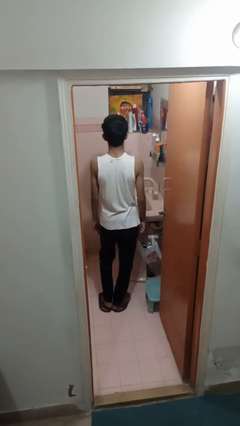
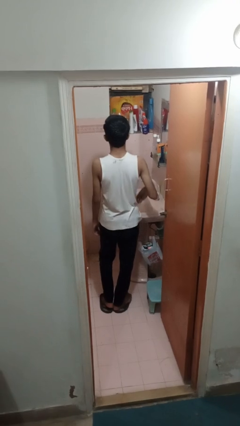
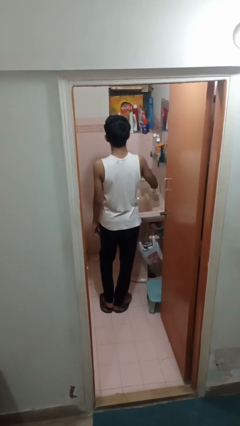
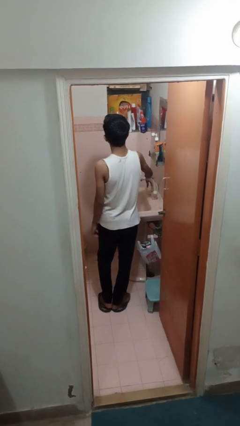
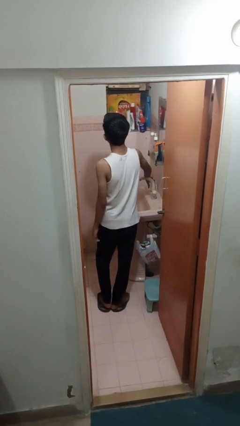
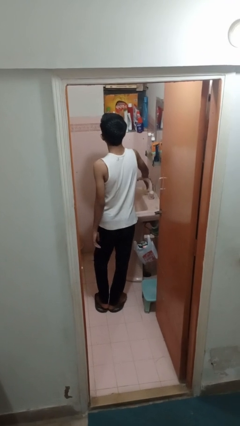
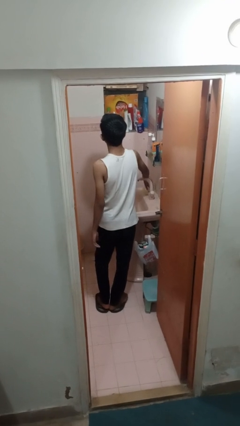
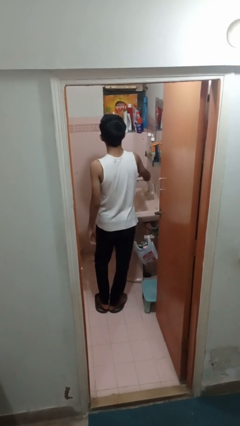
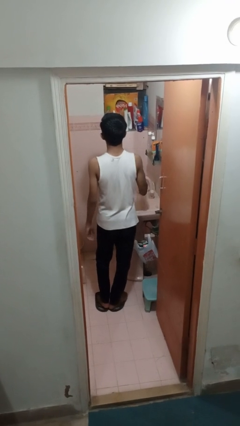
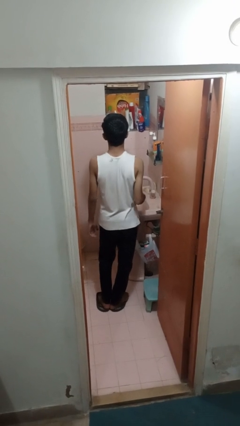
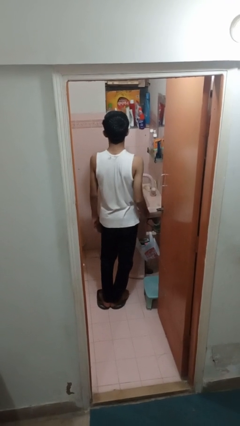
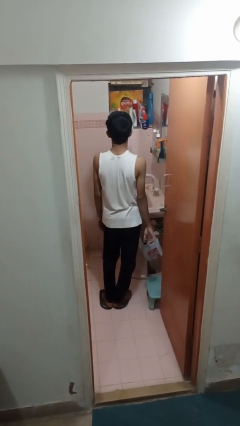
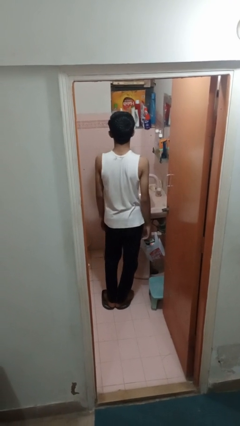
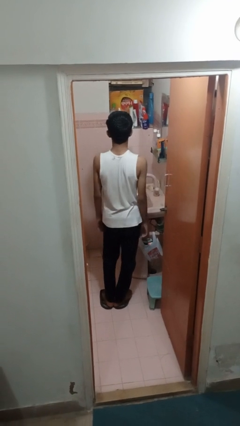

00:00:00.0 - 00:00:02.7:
person turns on faucet

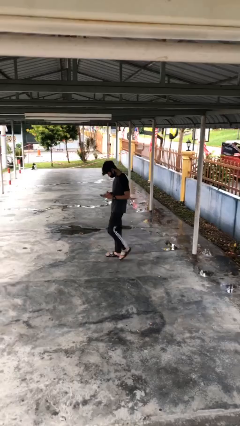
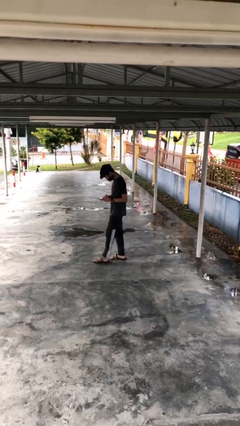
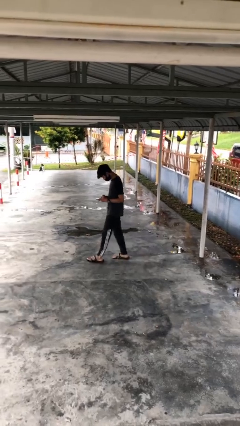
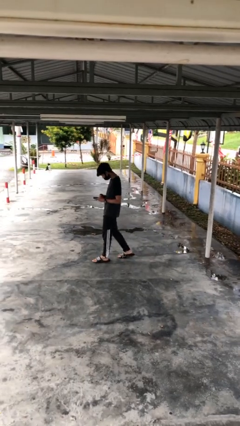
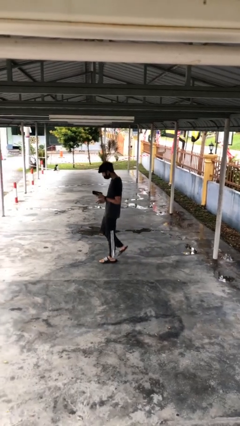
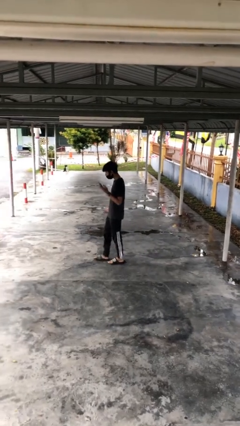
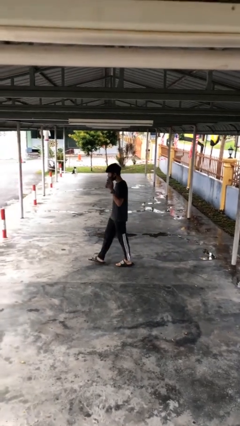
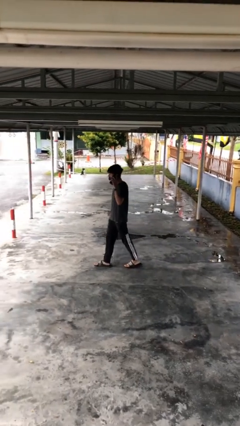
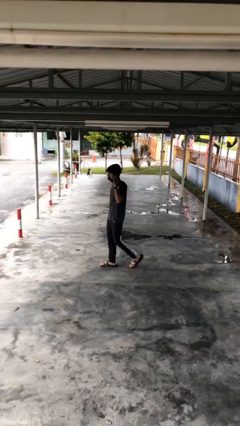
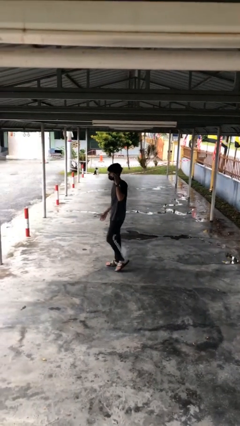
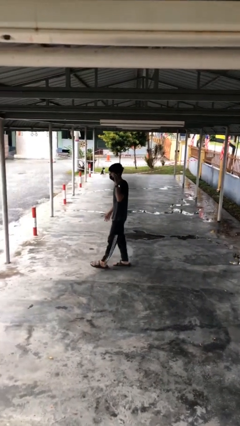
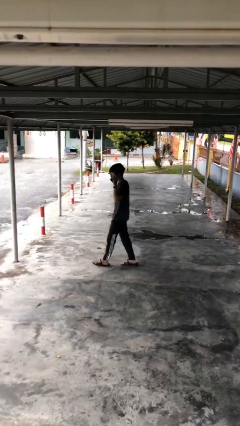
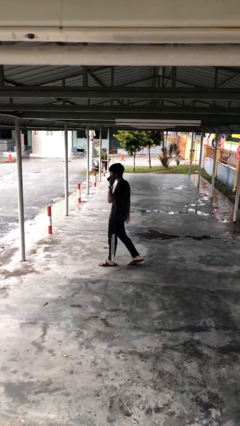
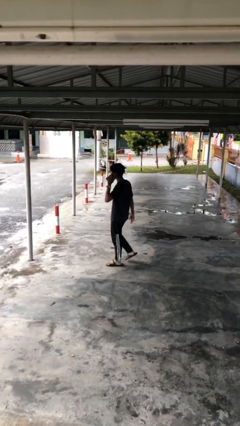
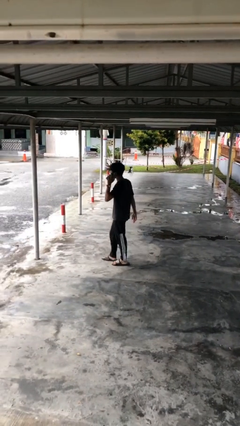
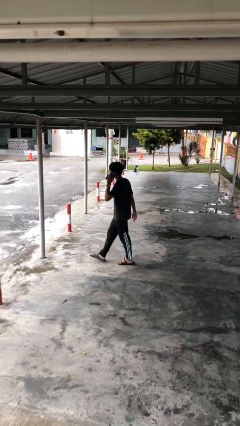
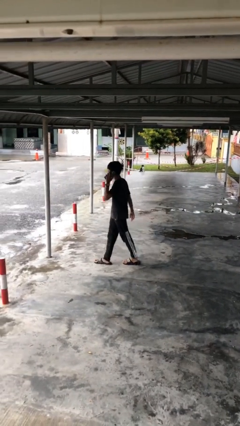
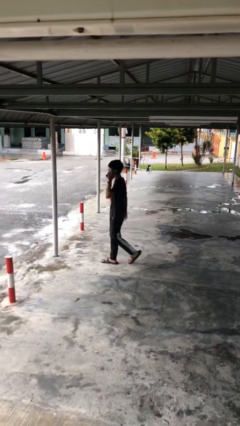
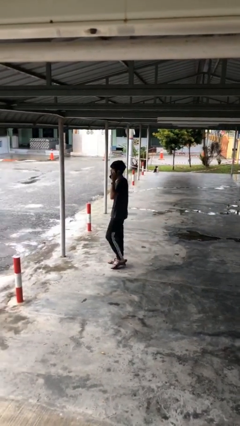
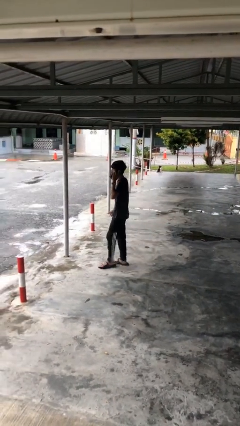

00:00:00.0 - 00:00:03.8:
person talks on phone

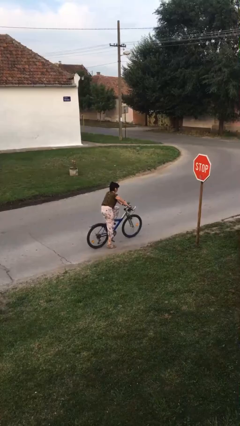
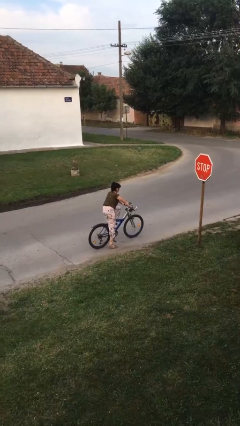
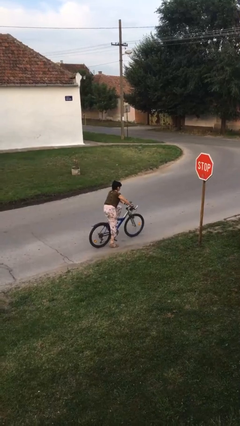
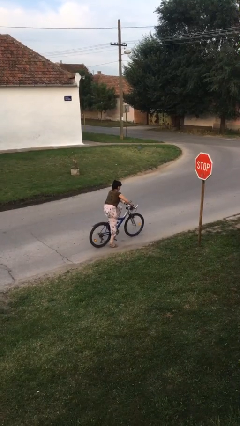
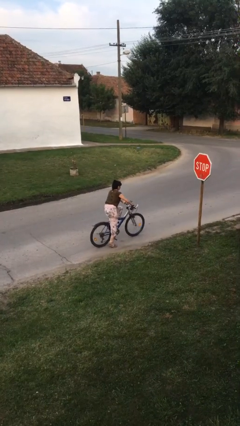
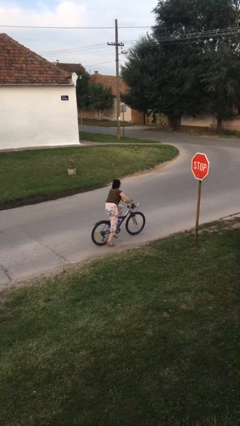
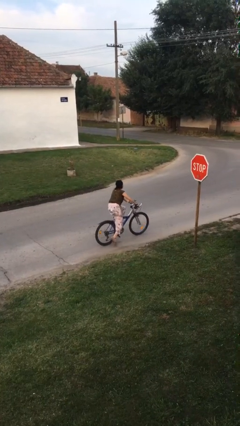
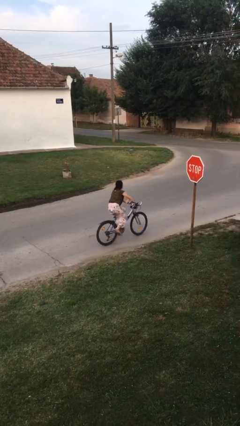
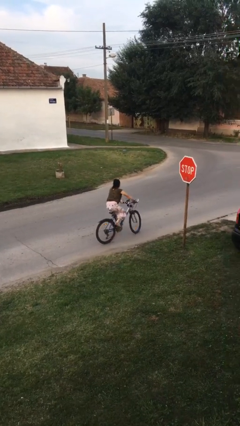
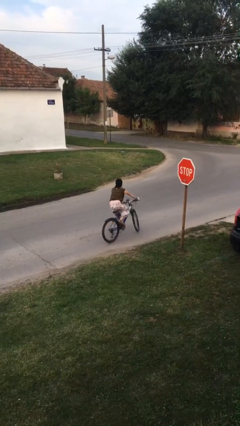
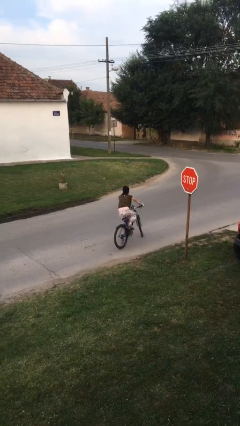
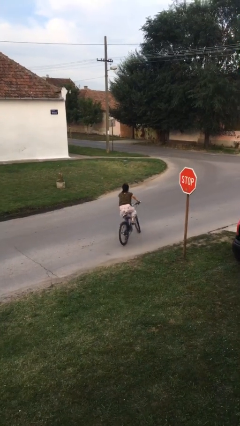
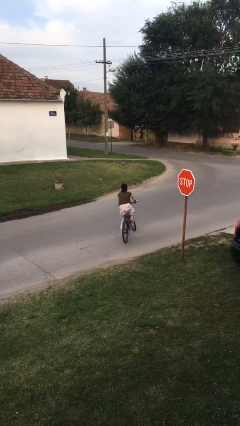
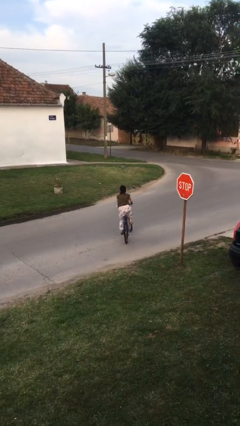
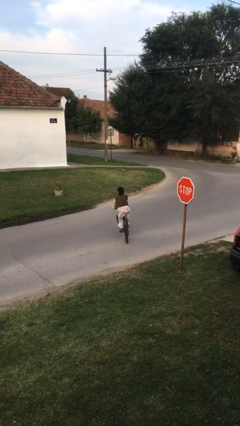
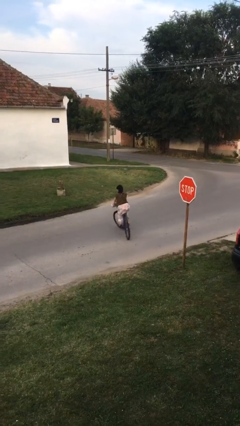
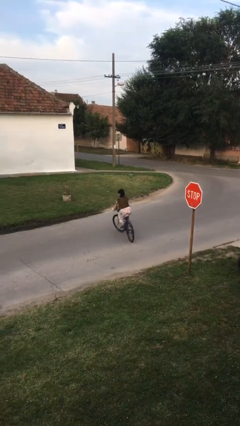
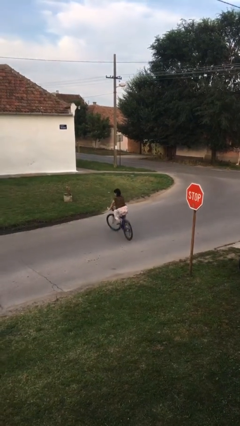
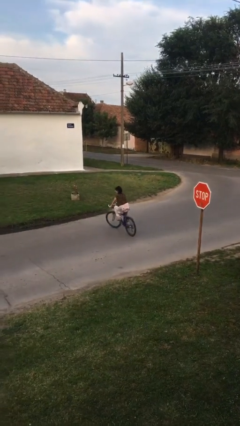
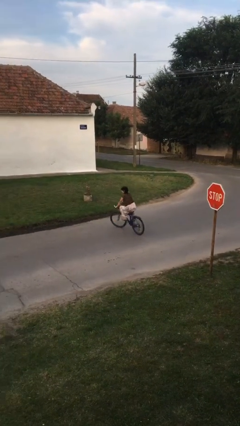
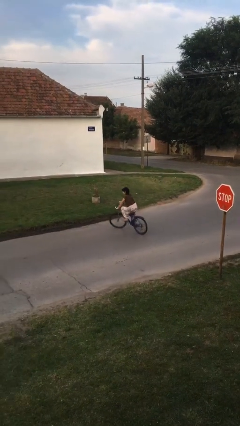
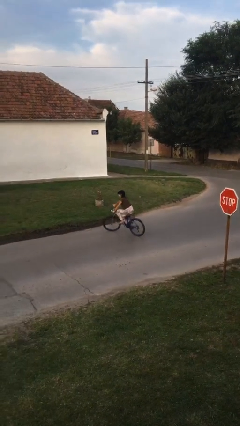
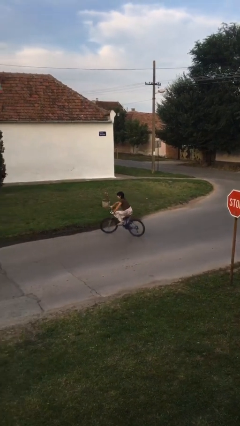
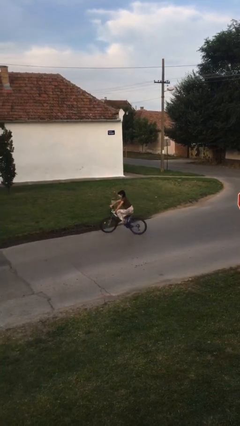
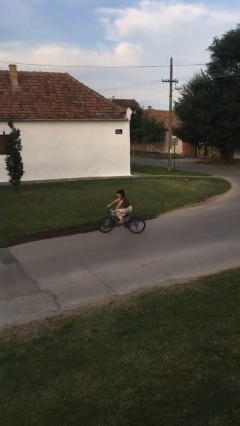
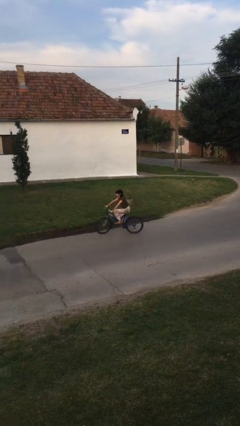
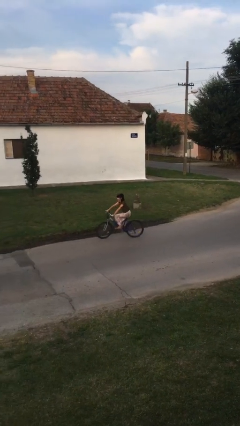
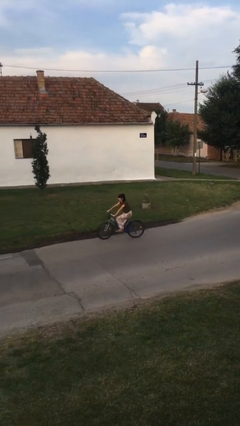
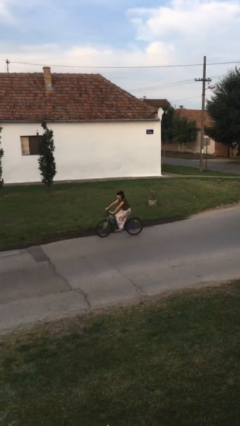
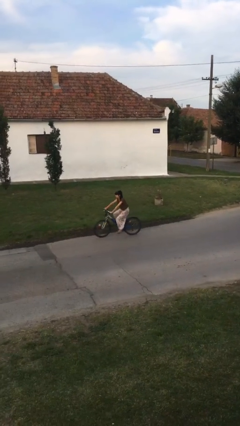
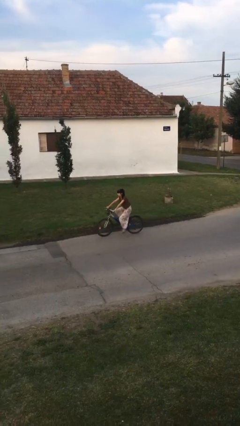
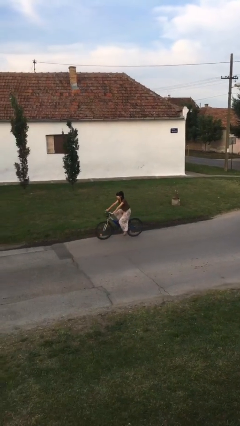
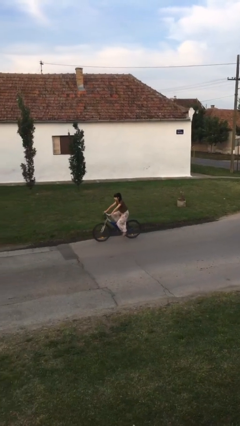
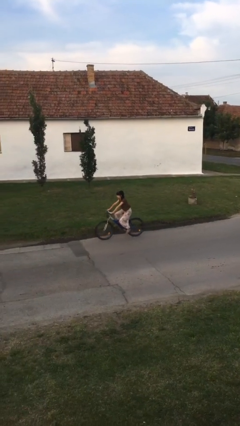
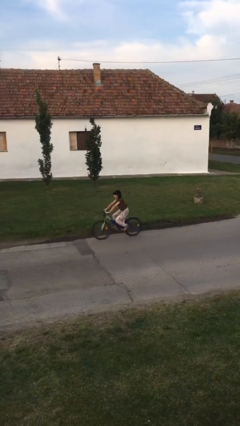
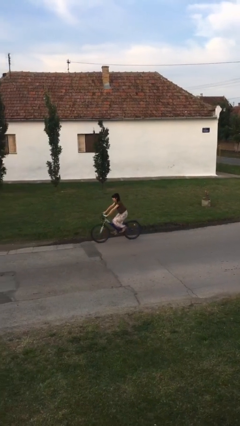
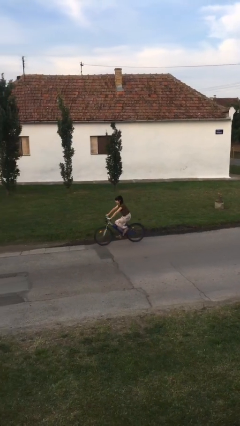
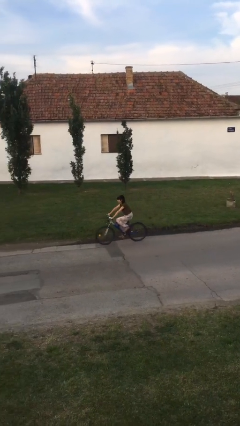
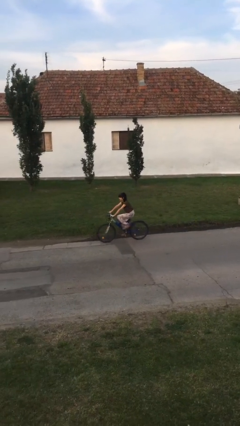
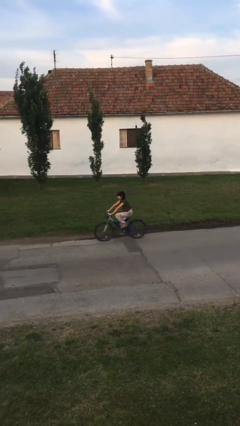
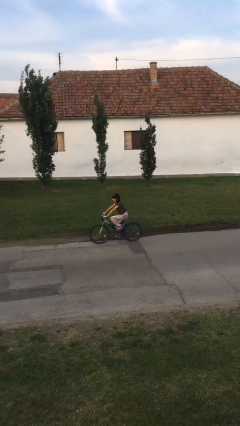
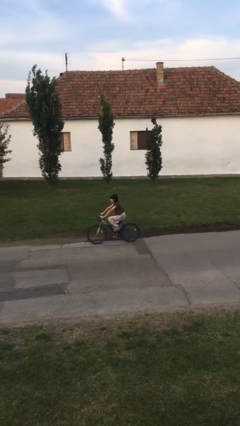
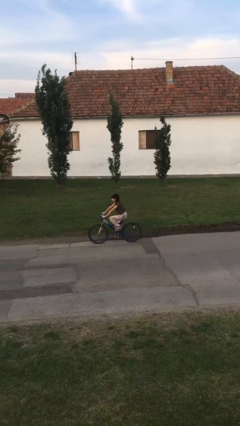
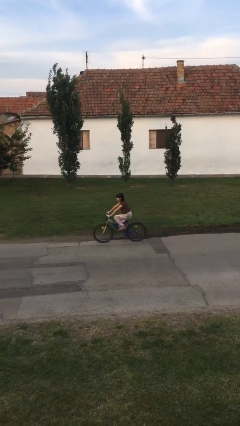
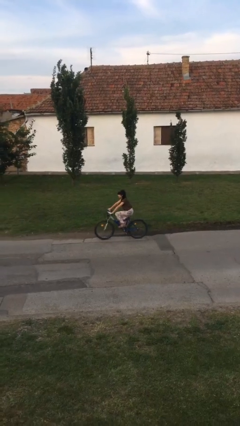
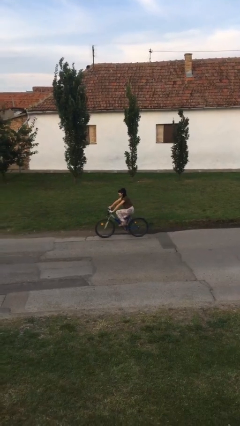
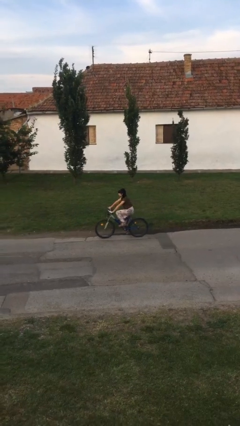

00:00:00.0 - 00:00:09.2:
person rides bicycle

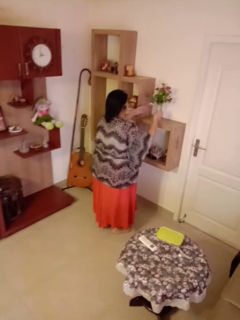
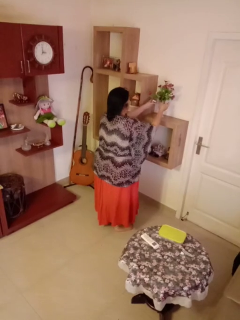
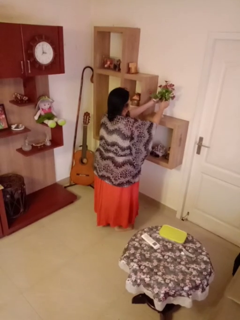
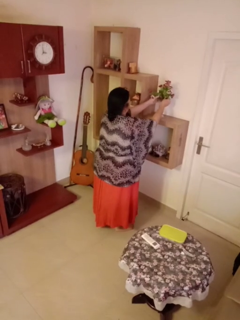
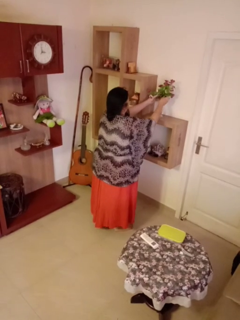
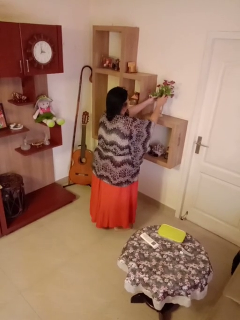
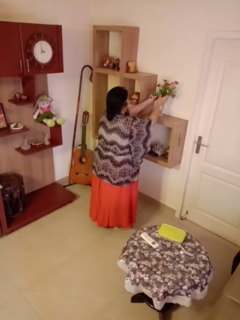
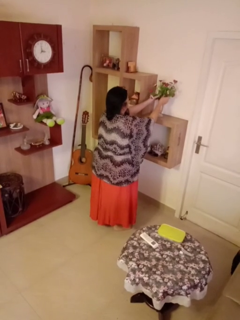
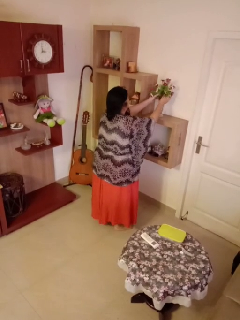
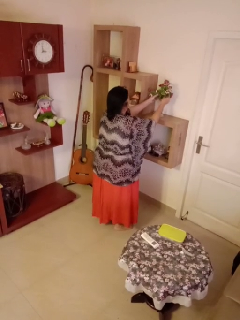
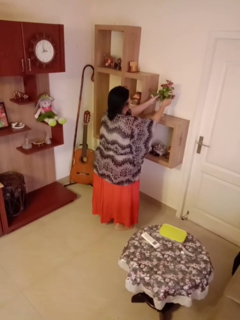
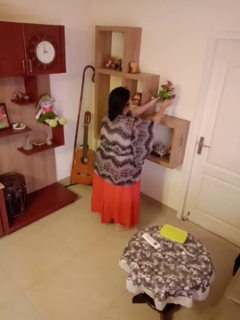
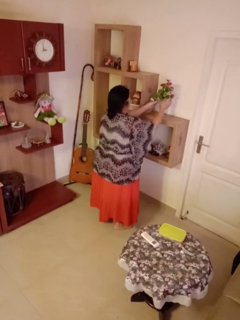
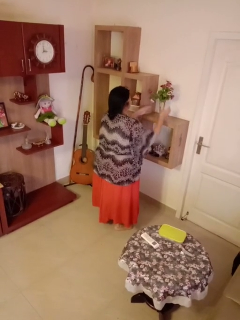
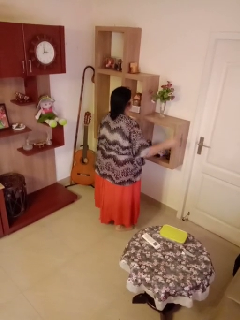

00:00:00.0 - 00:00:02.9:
person arranges flowers in vase

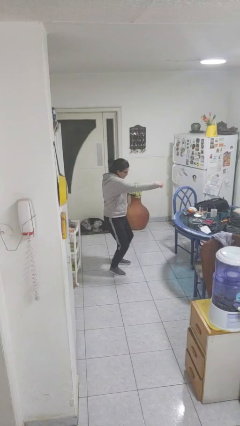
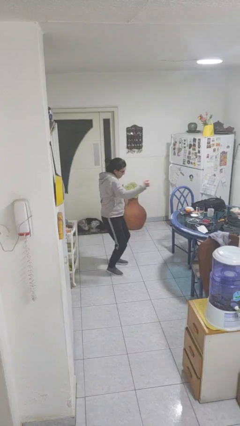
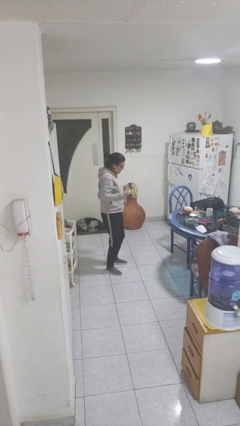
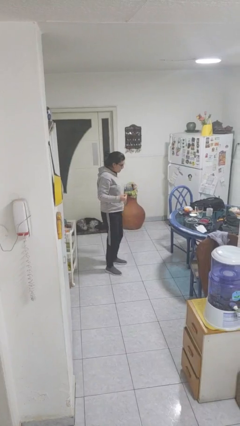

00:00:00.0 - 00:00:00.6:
person punches
